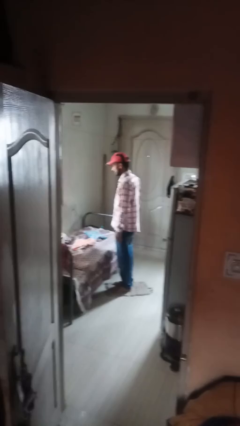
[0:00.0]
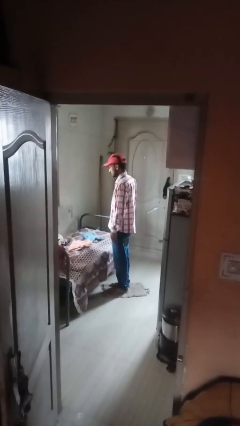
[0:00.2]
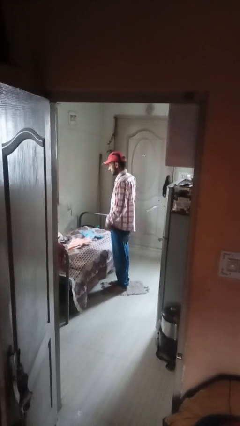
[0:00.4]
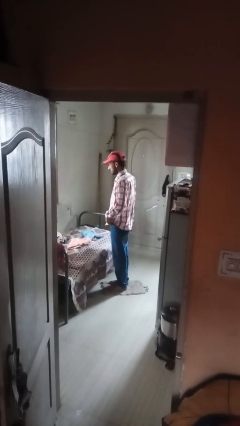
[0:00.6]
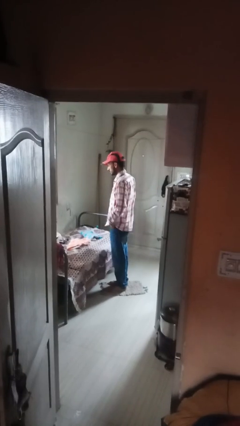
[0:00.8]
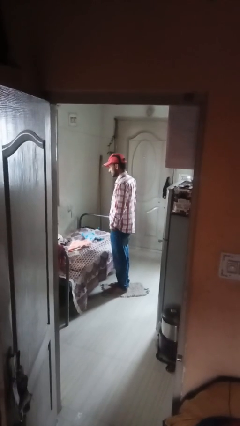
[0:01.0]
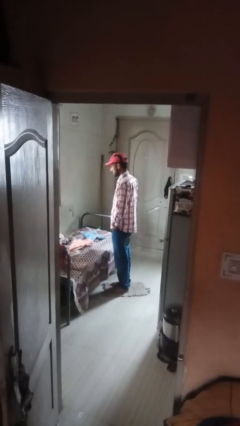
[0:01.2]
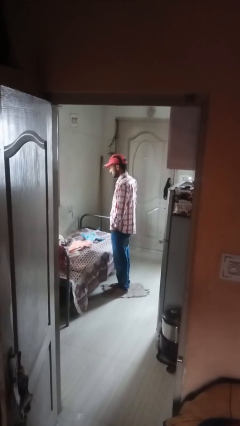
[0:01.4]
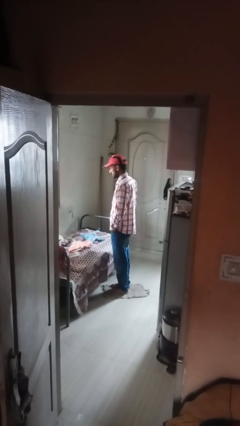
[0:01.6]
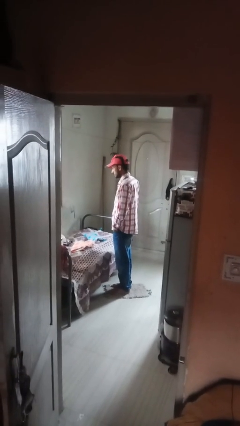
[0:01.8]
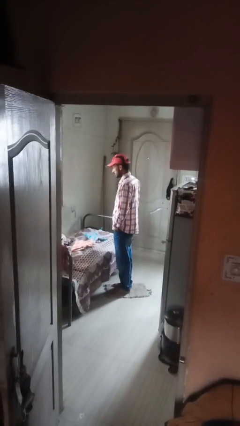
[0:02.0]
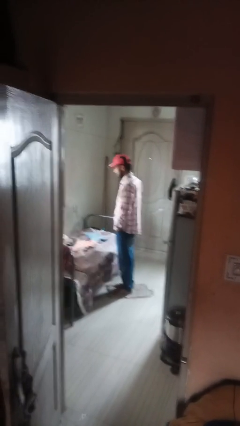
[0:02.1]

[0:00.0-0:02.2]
person puts hands in back pockets

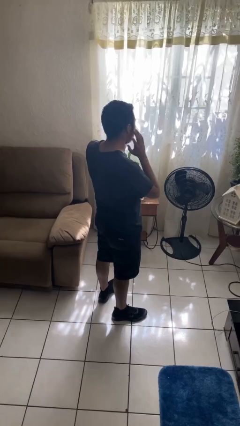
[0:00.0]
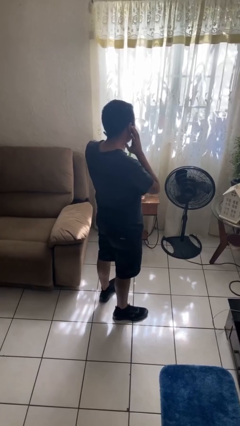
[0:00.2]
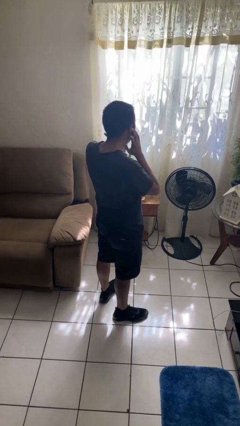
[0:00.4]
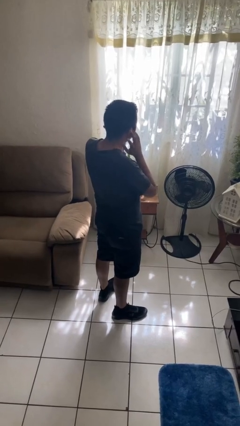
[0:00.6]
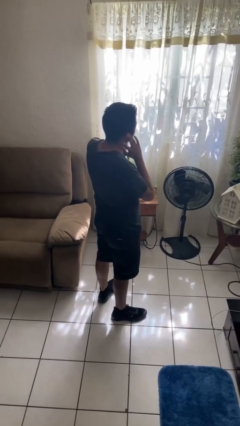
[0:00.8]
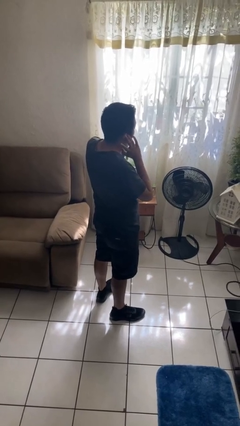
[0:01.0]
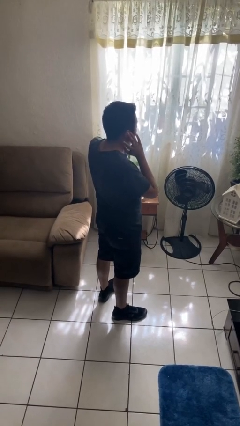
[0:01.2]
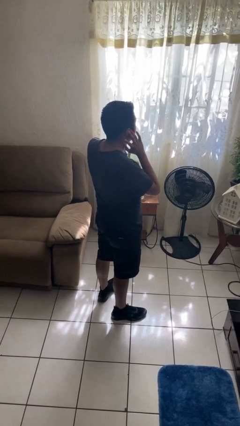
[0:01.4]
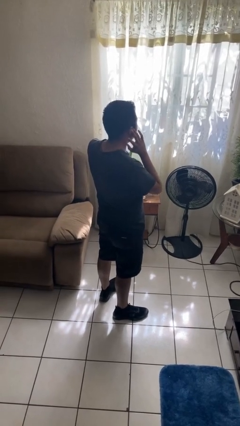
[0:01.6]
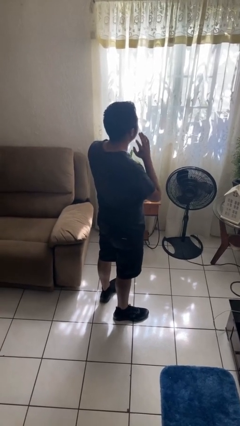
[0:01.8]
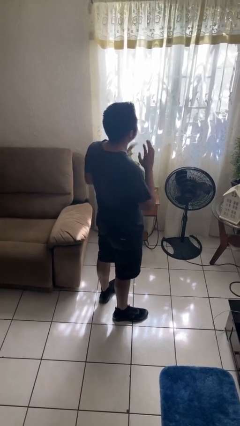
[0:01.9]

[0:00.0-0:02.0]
person puts fingers in ear

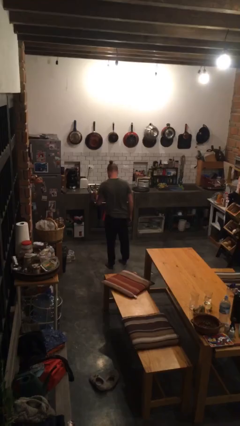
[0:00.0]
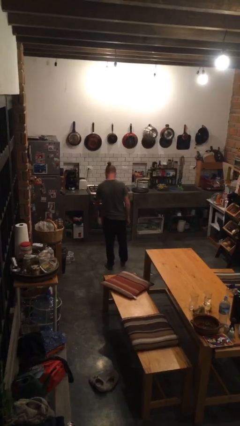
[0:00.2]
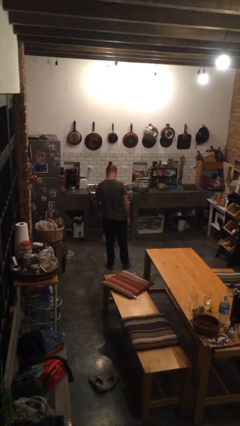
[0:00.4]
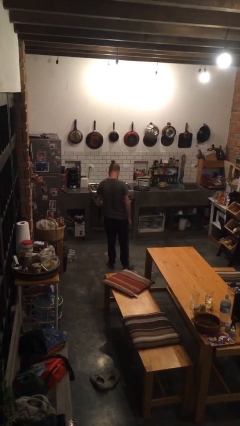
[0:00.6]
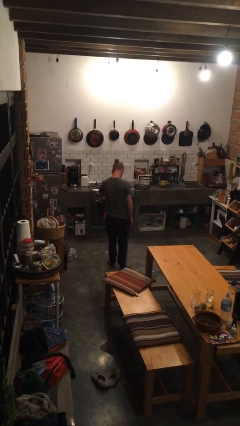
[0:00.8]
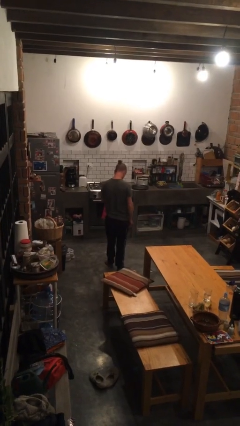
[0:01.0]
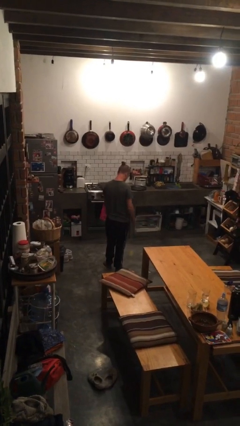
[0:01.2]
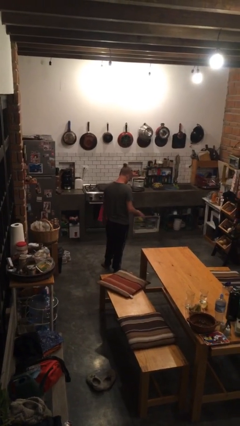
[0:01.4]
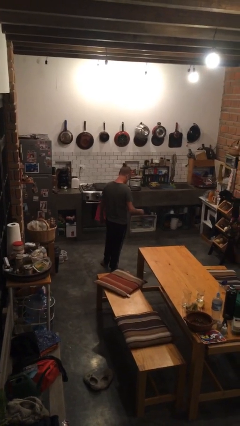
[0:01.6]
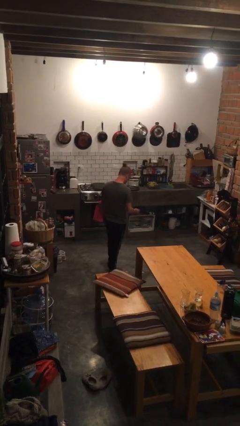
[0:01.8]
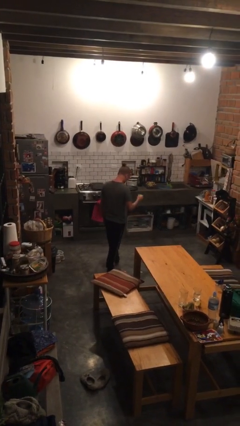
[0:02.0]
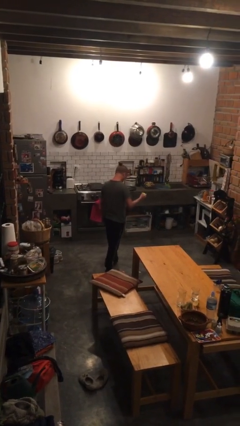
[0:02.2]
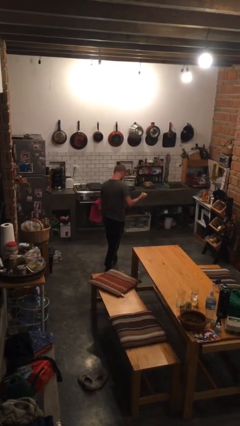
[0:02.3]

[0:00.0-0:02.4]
person bounces ball on floor

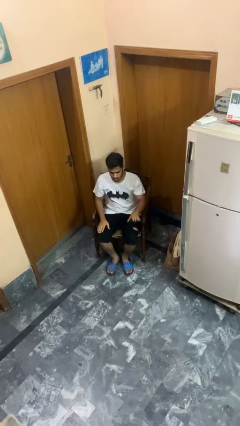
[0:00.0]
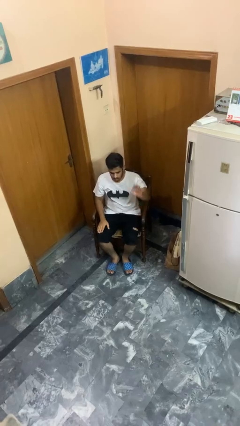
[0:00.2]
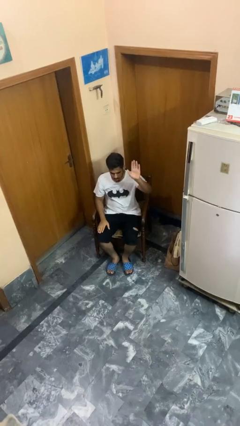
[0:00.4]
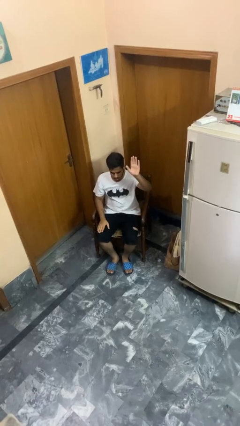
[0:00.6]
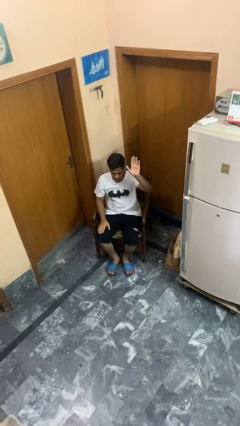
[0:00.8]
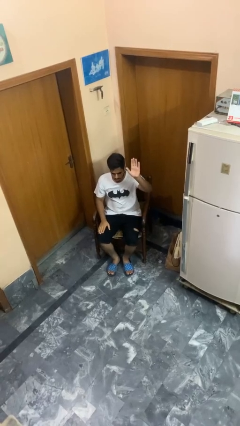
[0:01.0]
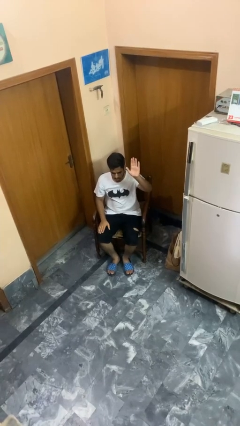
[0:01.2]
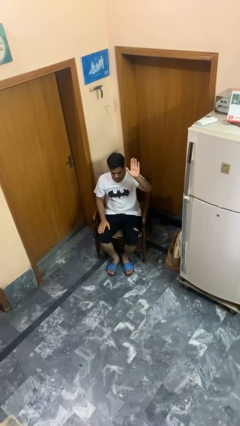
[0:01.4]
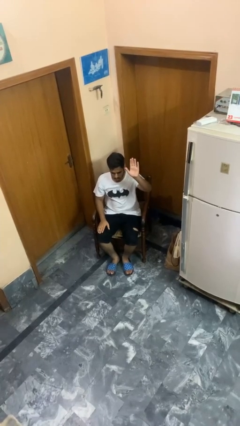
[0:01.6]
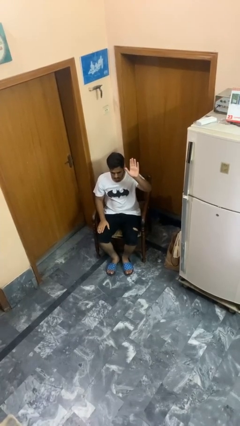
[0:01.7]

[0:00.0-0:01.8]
person gestures raise hand

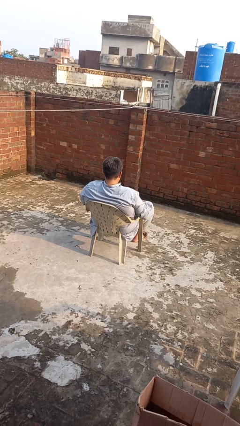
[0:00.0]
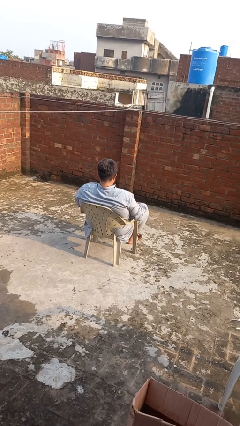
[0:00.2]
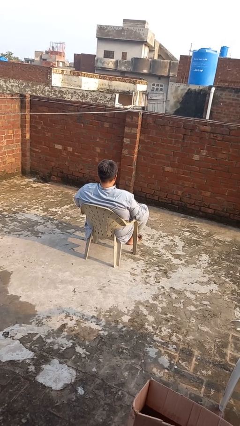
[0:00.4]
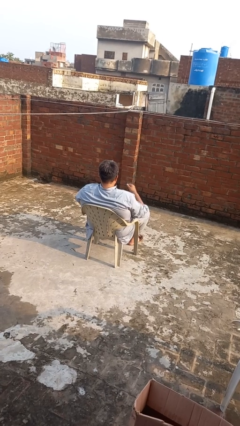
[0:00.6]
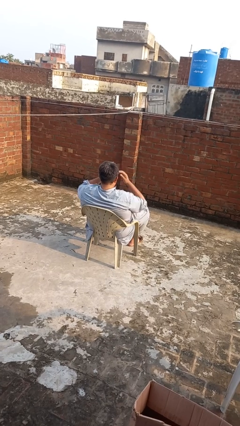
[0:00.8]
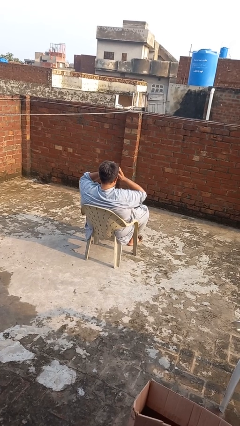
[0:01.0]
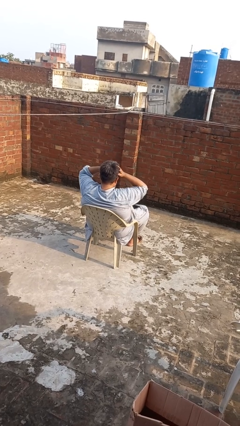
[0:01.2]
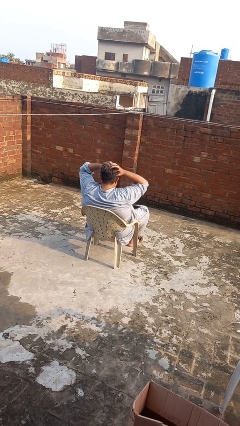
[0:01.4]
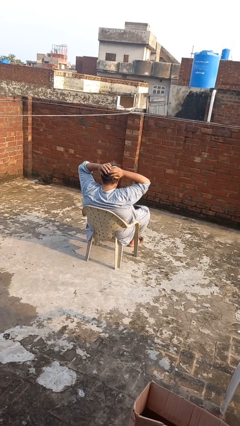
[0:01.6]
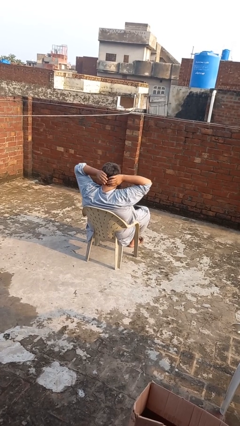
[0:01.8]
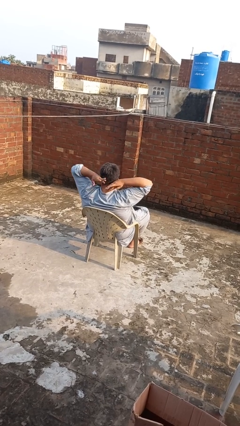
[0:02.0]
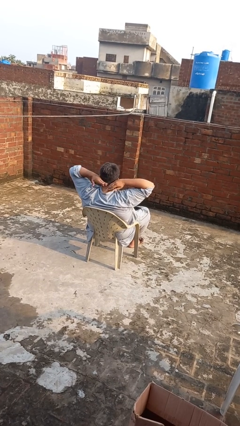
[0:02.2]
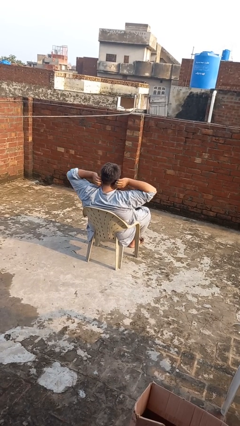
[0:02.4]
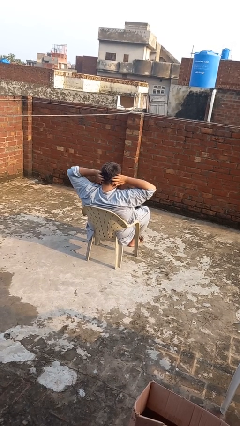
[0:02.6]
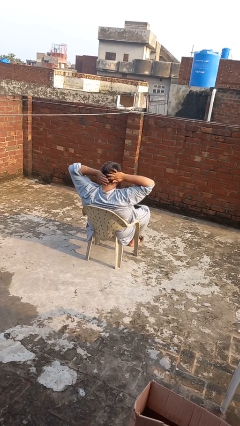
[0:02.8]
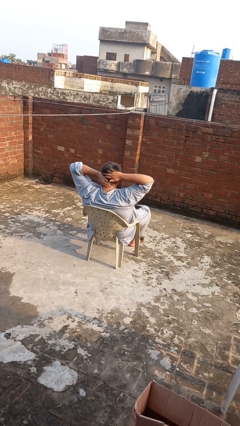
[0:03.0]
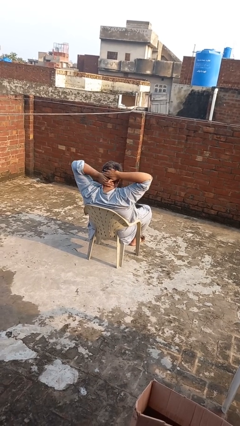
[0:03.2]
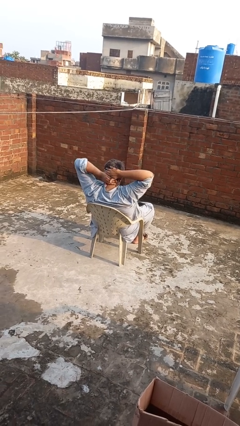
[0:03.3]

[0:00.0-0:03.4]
person strokes hair

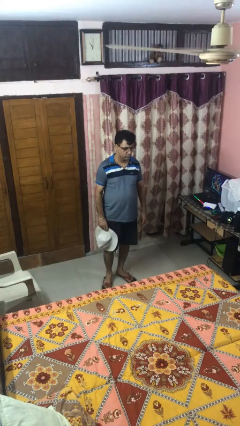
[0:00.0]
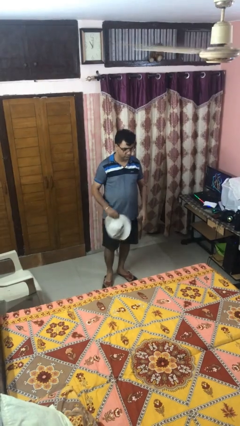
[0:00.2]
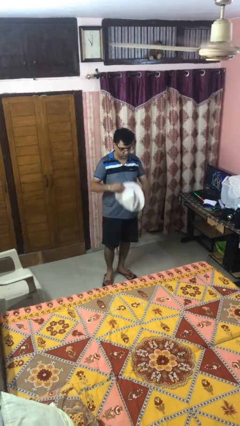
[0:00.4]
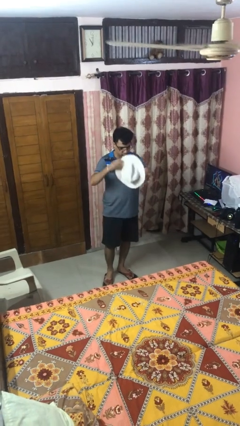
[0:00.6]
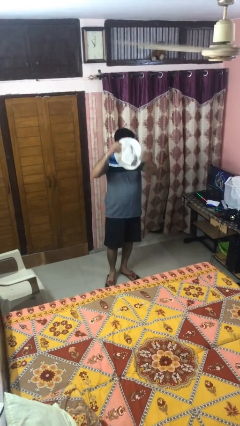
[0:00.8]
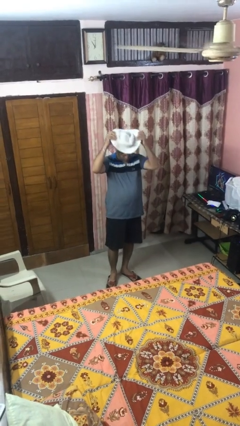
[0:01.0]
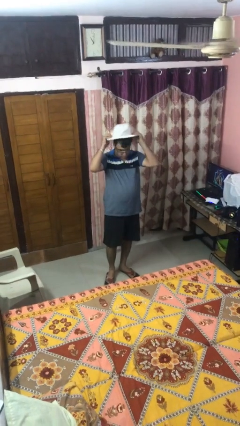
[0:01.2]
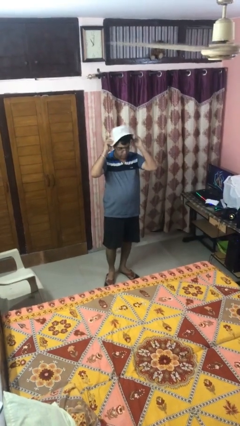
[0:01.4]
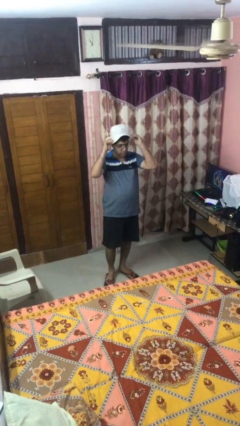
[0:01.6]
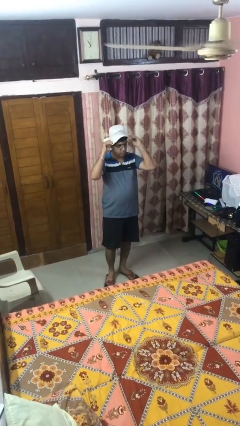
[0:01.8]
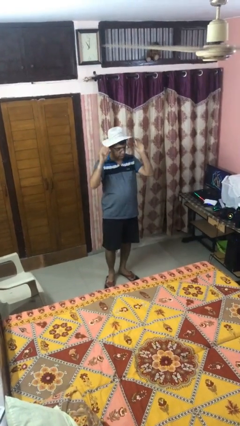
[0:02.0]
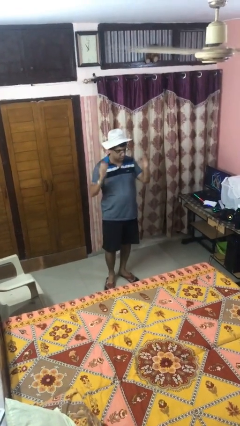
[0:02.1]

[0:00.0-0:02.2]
person puts on hat

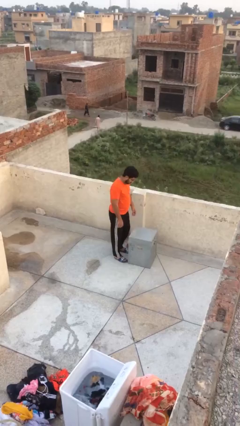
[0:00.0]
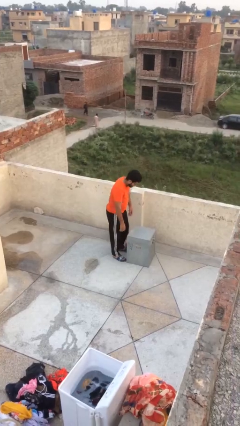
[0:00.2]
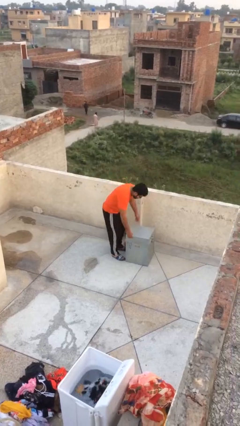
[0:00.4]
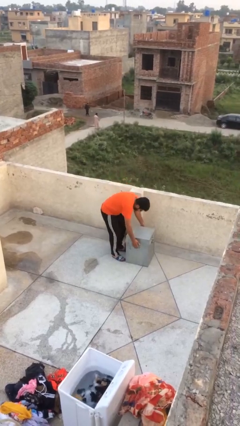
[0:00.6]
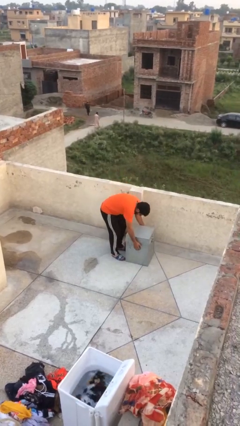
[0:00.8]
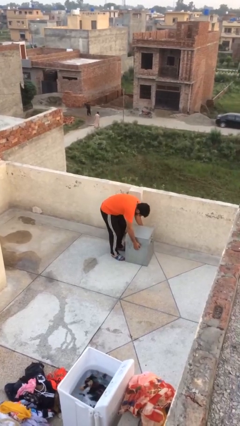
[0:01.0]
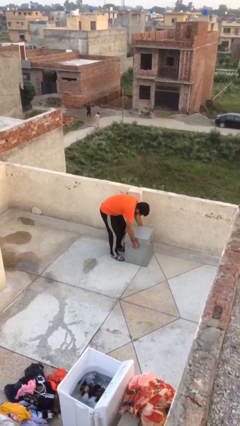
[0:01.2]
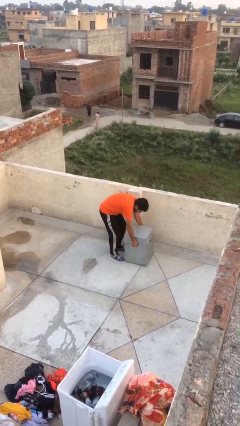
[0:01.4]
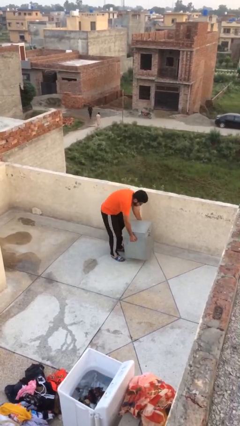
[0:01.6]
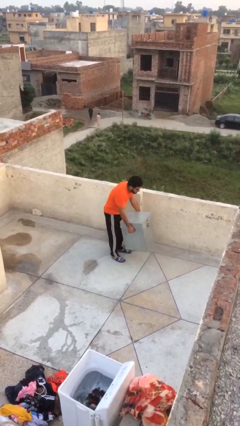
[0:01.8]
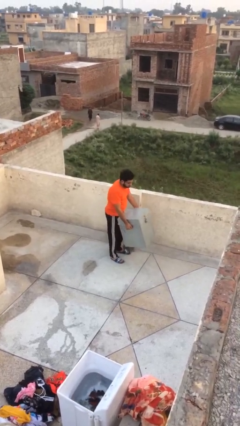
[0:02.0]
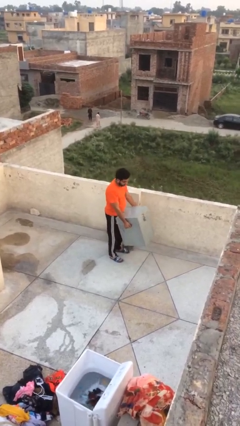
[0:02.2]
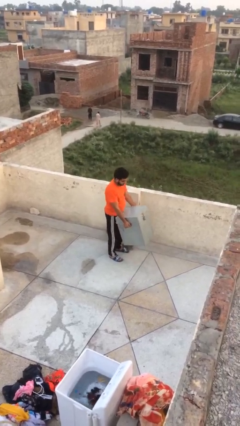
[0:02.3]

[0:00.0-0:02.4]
person picks up object from floor

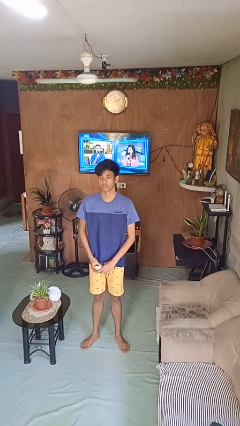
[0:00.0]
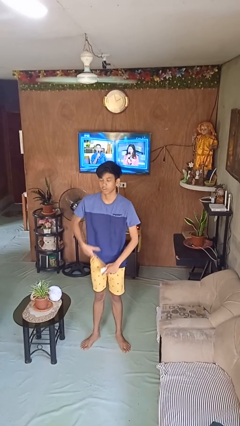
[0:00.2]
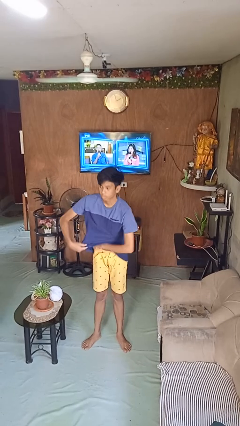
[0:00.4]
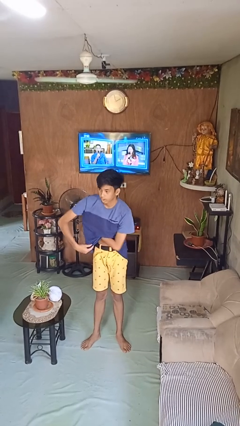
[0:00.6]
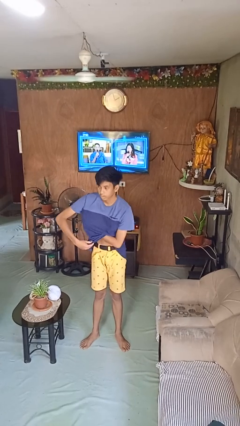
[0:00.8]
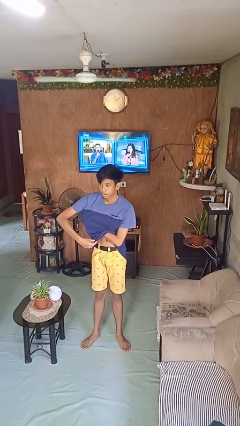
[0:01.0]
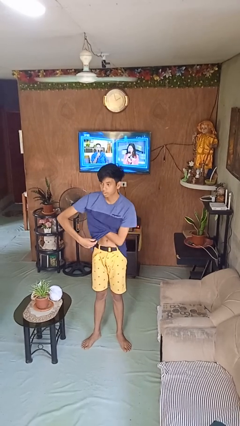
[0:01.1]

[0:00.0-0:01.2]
person applies deodorant
